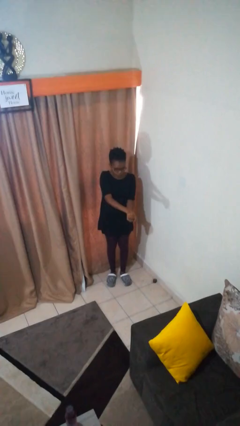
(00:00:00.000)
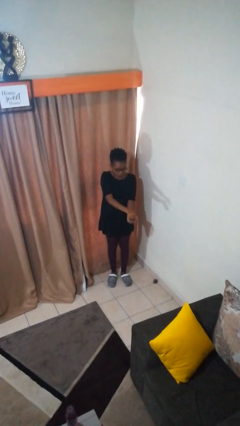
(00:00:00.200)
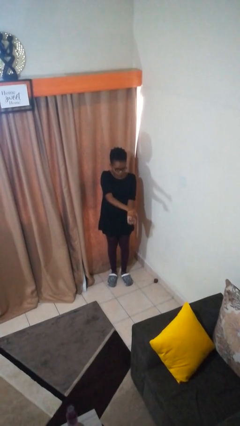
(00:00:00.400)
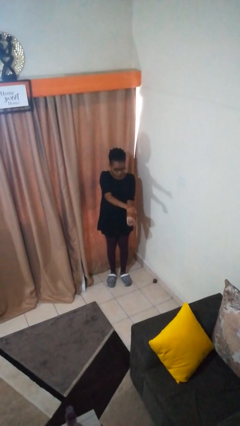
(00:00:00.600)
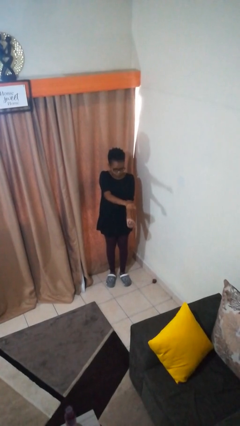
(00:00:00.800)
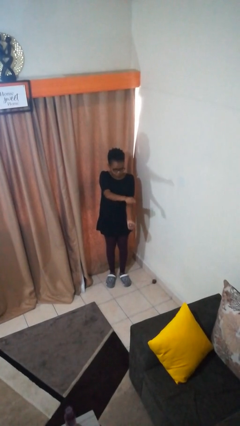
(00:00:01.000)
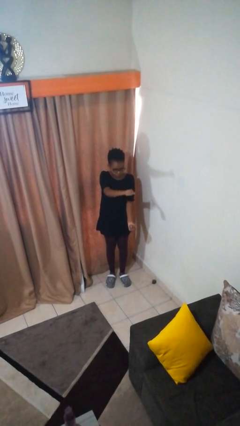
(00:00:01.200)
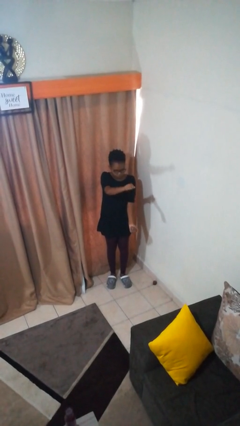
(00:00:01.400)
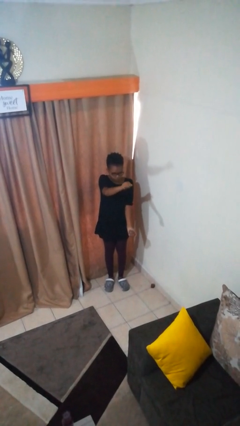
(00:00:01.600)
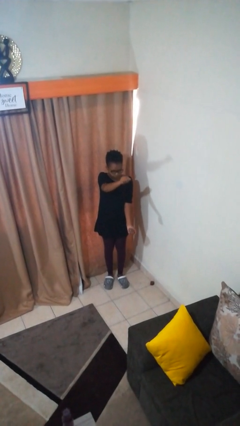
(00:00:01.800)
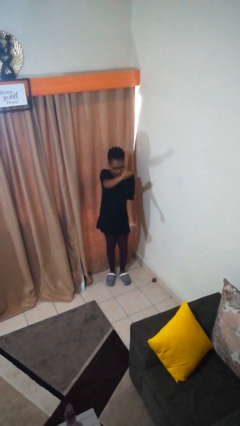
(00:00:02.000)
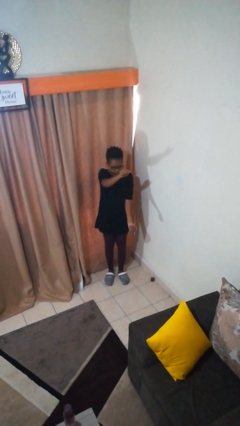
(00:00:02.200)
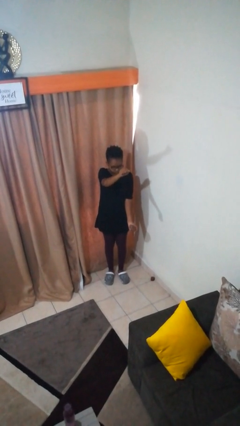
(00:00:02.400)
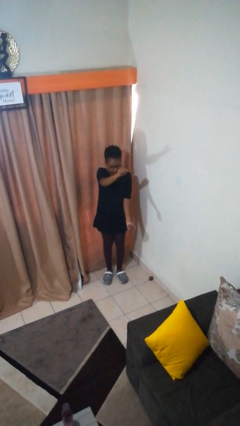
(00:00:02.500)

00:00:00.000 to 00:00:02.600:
person gestures zoom in

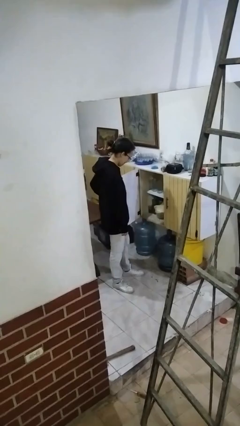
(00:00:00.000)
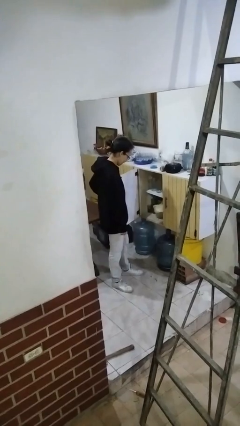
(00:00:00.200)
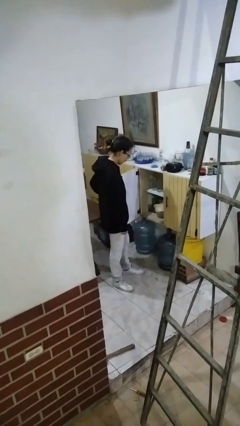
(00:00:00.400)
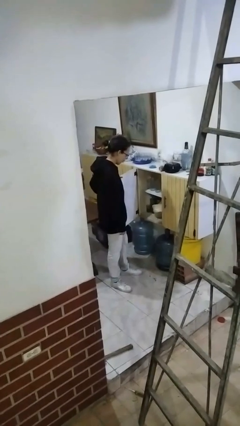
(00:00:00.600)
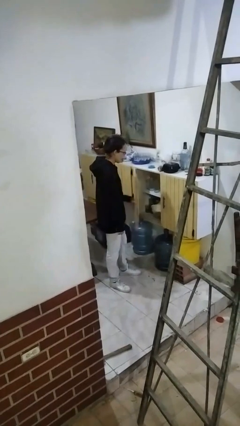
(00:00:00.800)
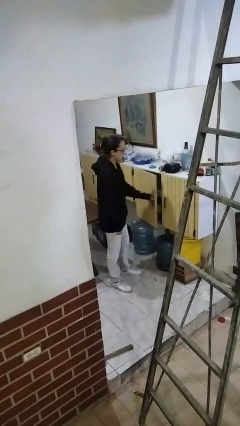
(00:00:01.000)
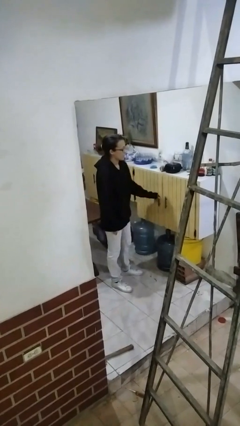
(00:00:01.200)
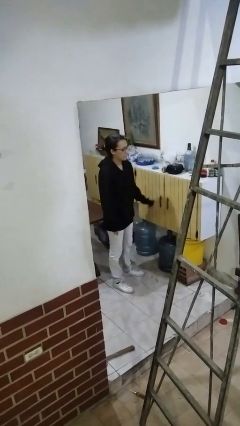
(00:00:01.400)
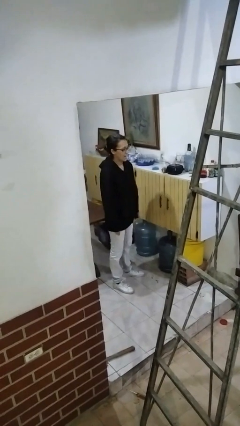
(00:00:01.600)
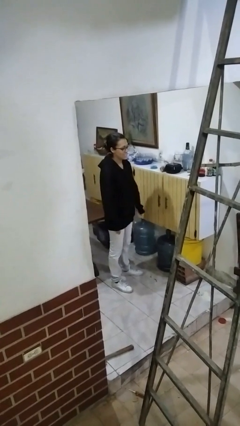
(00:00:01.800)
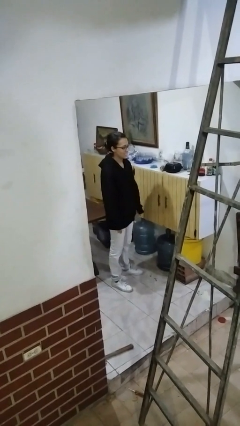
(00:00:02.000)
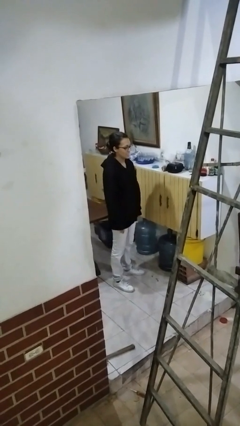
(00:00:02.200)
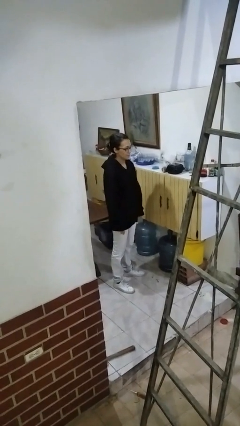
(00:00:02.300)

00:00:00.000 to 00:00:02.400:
person closes cabinet

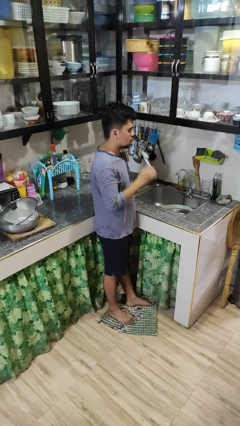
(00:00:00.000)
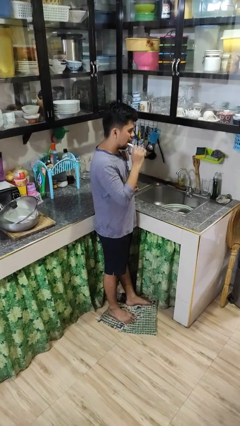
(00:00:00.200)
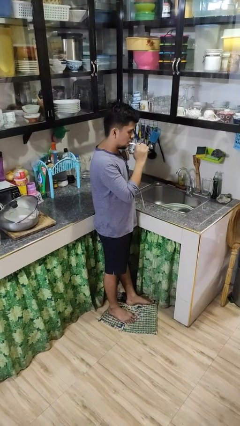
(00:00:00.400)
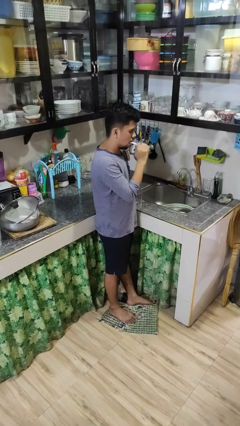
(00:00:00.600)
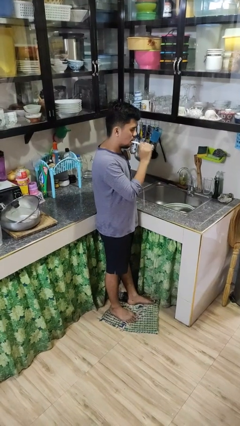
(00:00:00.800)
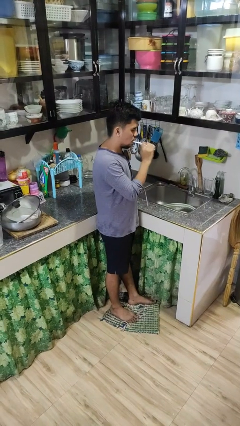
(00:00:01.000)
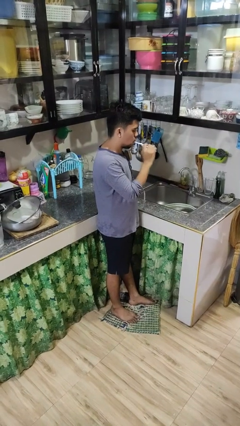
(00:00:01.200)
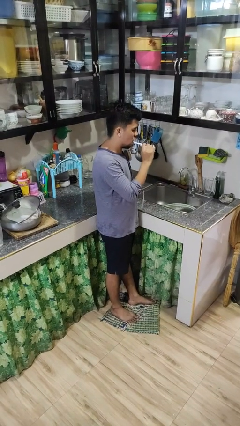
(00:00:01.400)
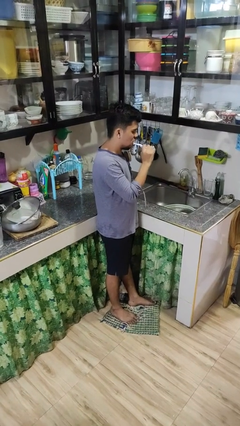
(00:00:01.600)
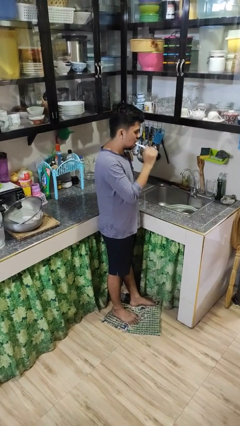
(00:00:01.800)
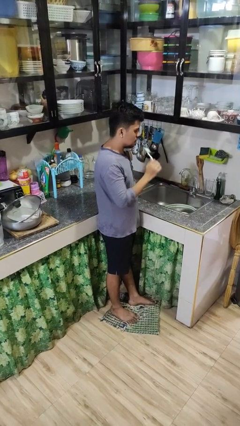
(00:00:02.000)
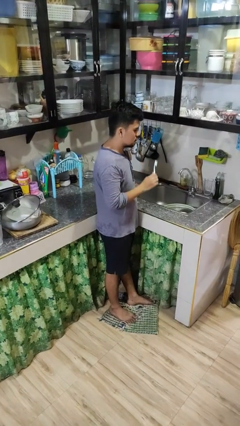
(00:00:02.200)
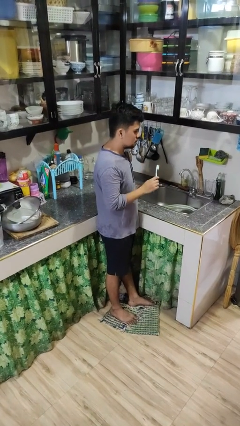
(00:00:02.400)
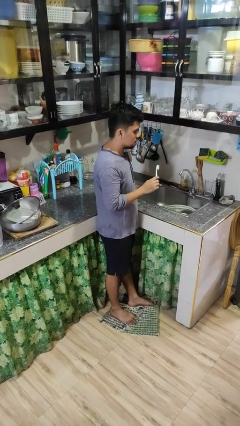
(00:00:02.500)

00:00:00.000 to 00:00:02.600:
person brushes teeth

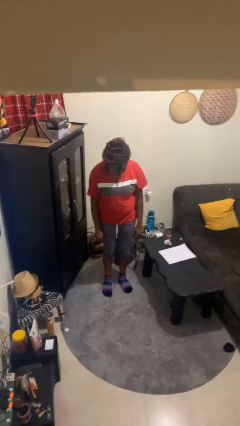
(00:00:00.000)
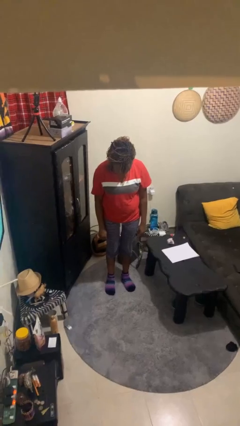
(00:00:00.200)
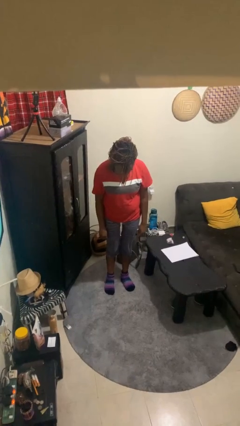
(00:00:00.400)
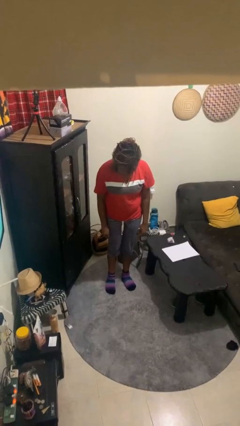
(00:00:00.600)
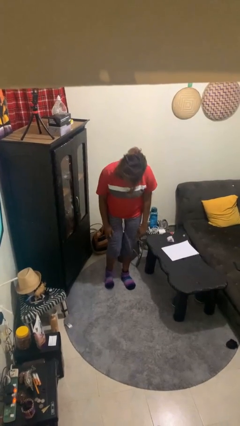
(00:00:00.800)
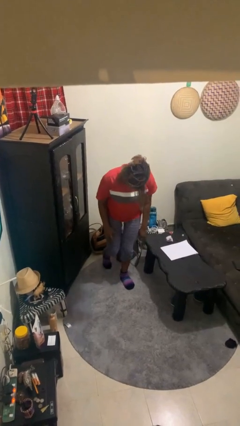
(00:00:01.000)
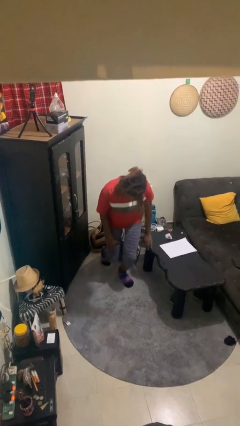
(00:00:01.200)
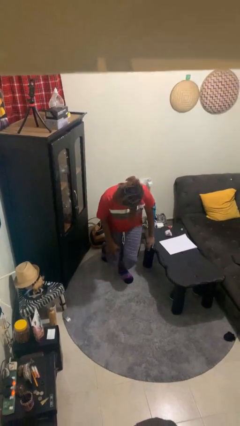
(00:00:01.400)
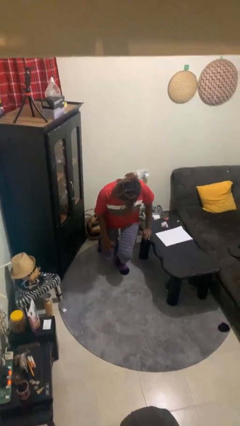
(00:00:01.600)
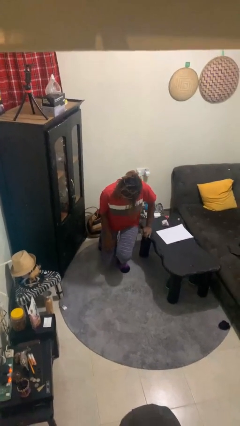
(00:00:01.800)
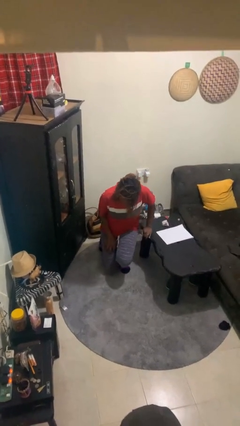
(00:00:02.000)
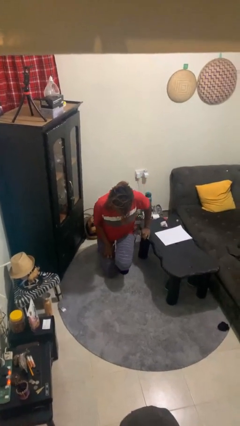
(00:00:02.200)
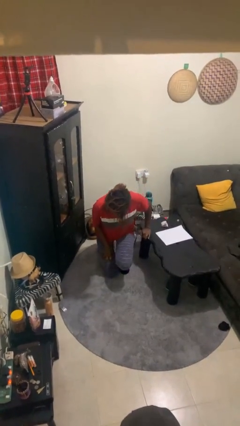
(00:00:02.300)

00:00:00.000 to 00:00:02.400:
person kneels

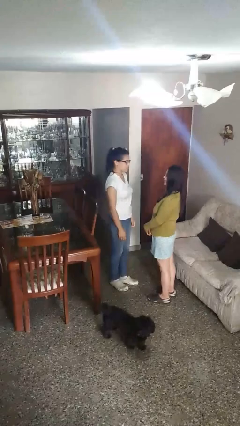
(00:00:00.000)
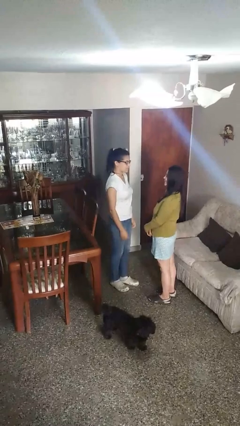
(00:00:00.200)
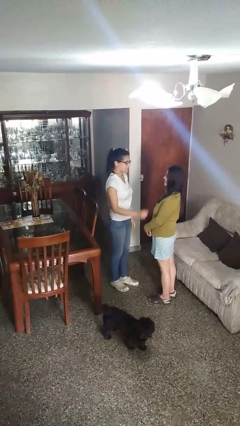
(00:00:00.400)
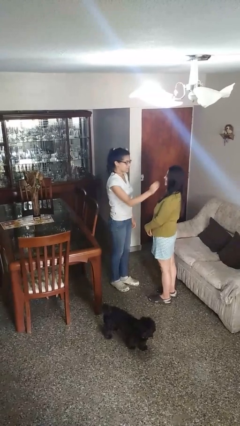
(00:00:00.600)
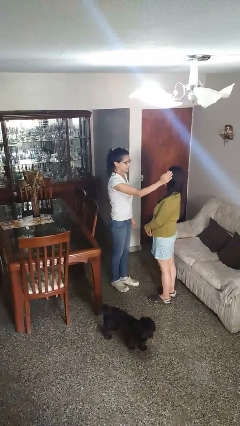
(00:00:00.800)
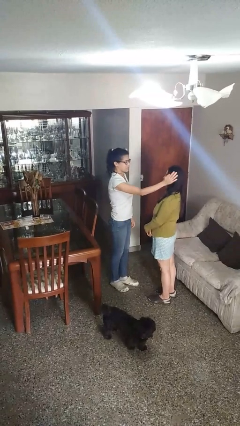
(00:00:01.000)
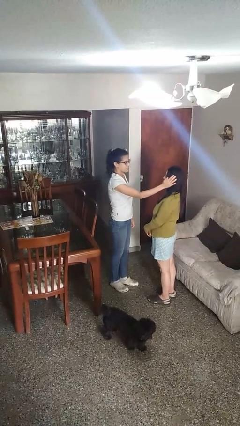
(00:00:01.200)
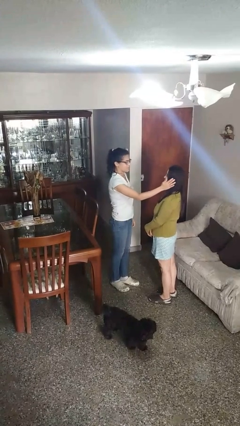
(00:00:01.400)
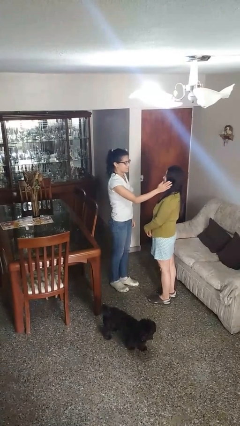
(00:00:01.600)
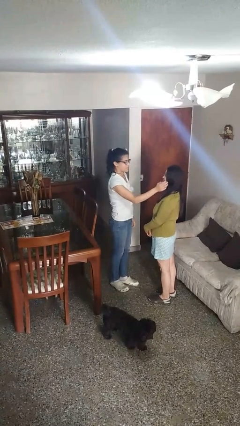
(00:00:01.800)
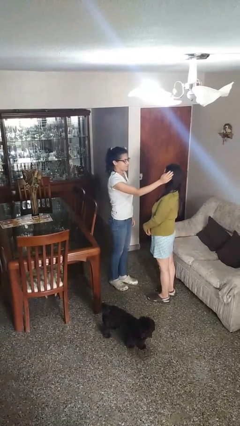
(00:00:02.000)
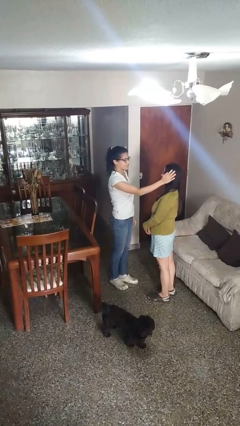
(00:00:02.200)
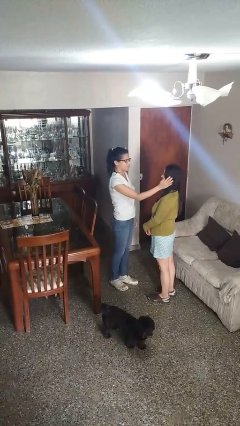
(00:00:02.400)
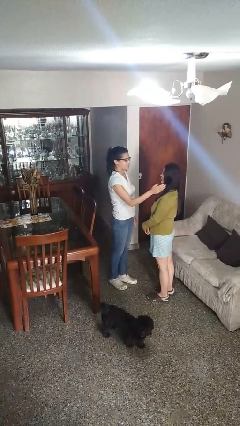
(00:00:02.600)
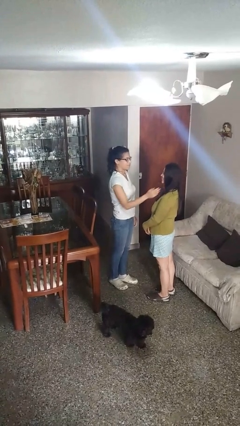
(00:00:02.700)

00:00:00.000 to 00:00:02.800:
person touches face of person

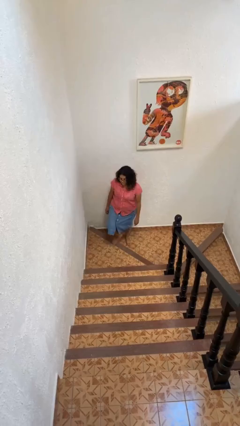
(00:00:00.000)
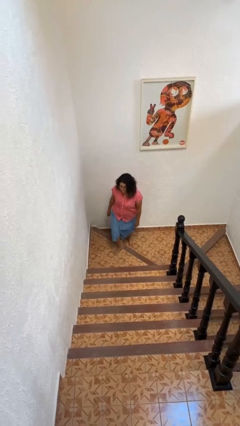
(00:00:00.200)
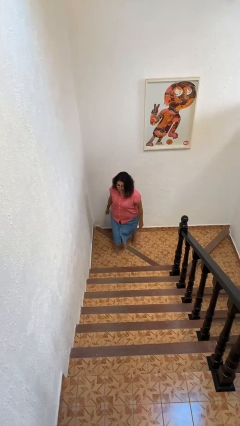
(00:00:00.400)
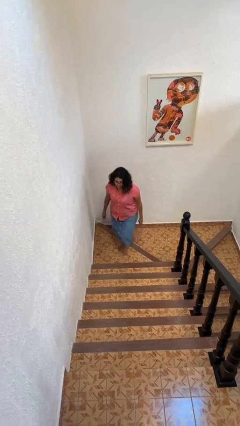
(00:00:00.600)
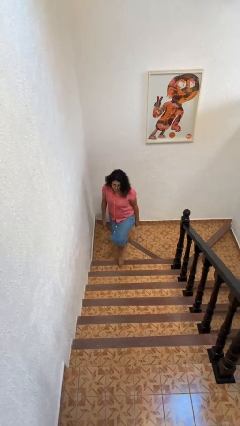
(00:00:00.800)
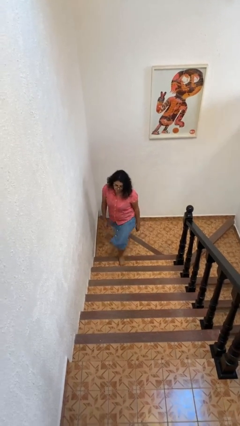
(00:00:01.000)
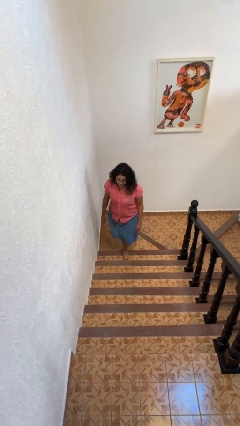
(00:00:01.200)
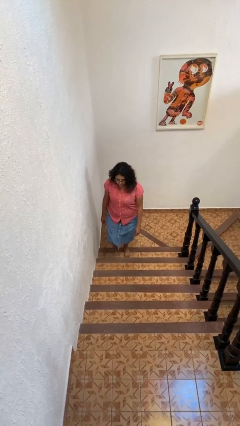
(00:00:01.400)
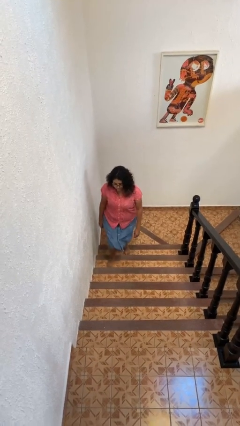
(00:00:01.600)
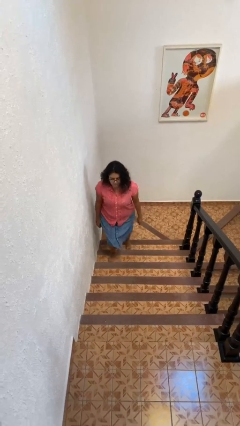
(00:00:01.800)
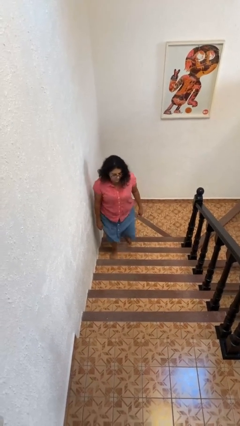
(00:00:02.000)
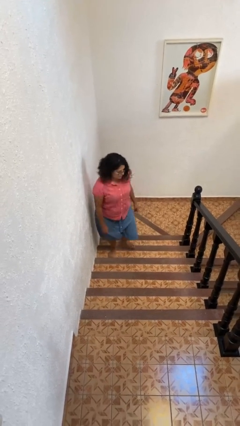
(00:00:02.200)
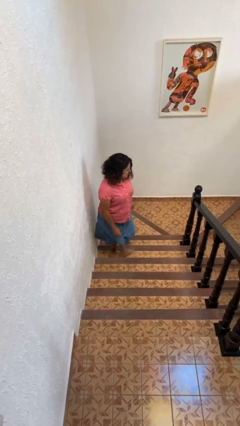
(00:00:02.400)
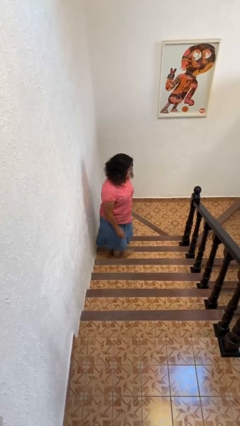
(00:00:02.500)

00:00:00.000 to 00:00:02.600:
person climbs up stairs

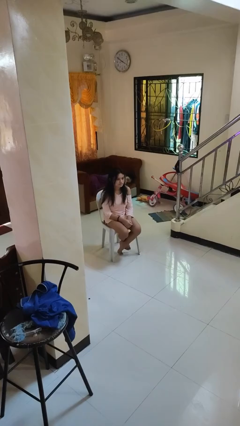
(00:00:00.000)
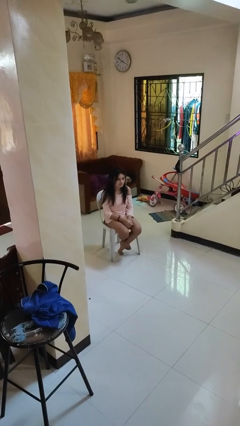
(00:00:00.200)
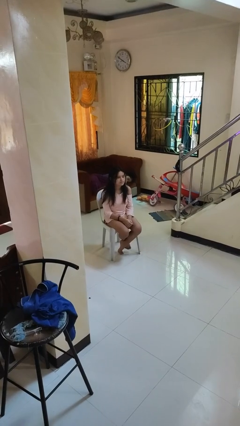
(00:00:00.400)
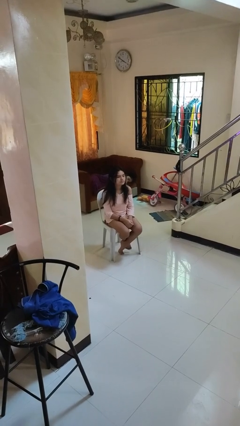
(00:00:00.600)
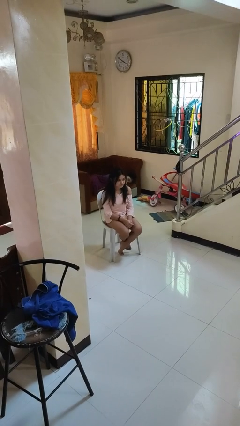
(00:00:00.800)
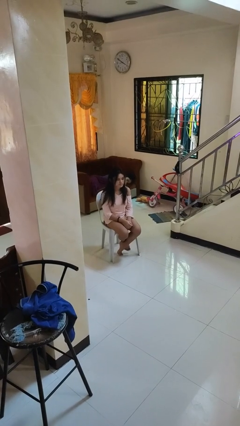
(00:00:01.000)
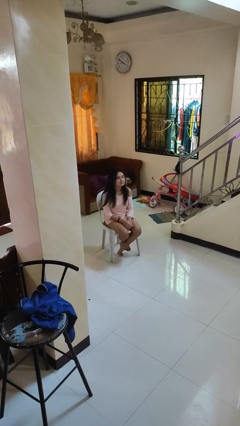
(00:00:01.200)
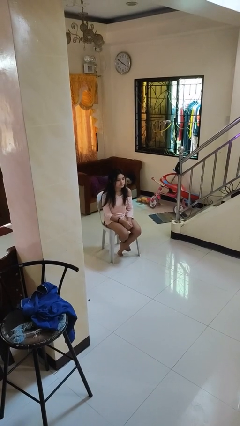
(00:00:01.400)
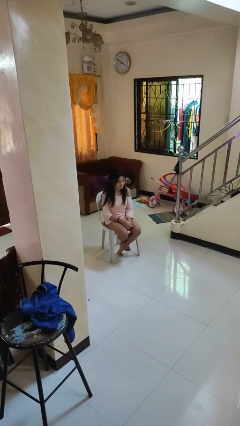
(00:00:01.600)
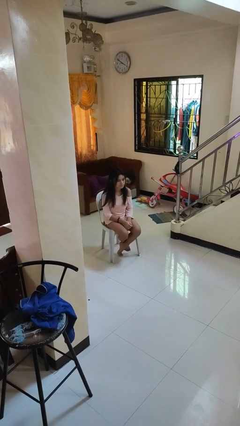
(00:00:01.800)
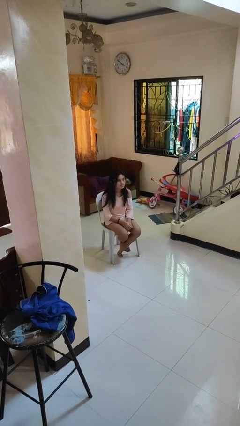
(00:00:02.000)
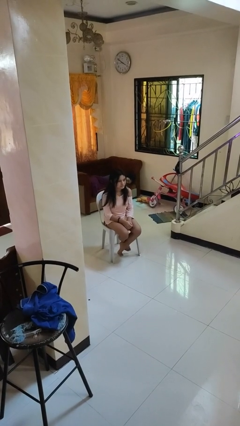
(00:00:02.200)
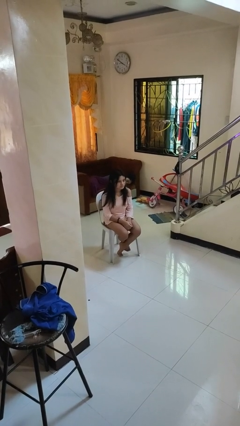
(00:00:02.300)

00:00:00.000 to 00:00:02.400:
person nods head
